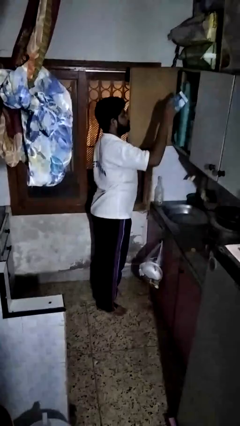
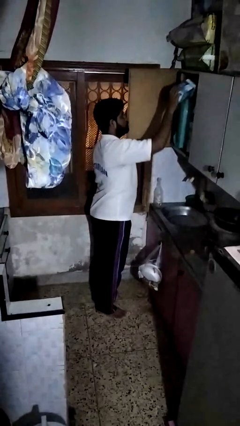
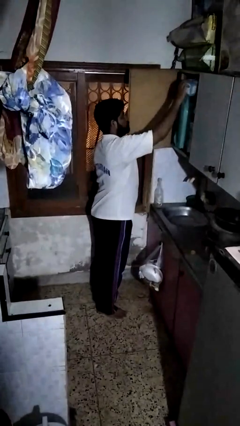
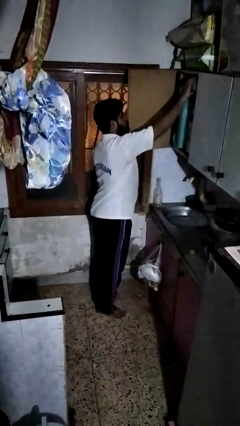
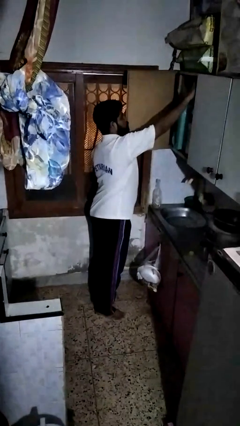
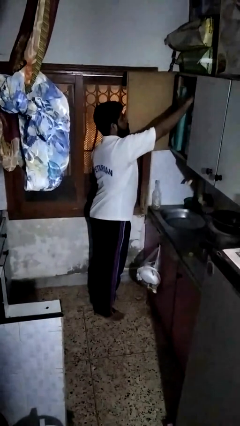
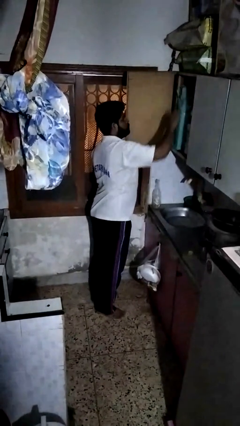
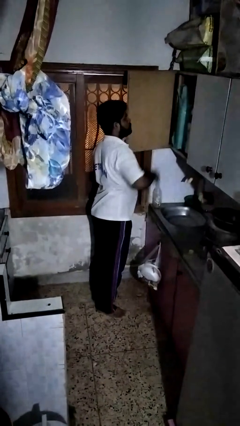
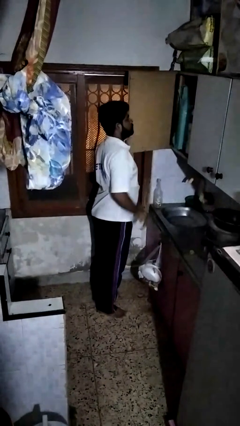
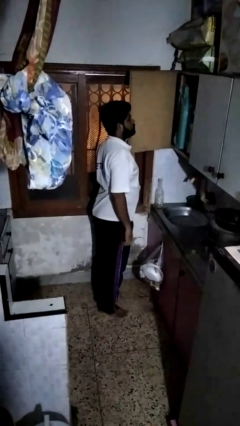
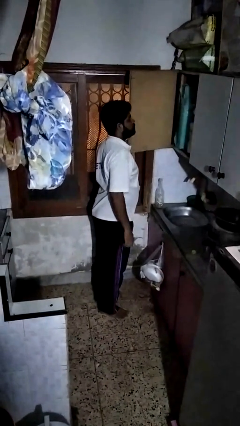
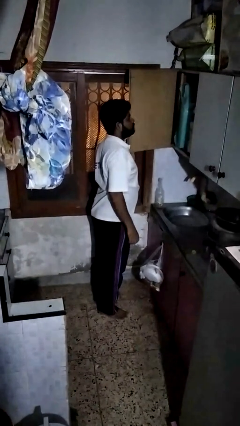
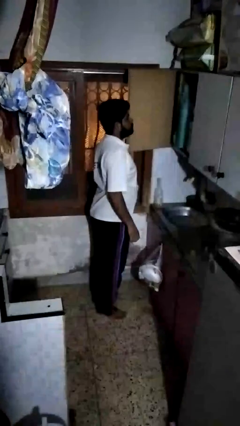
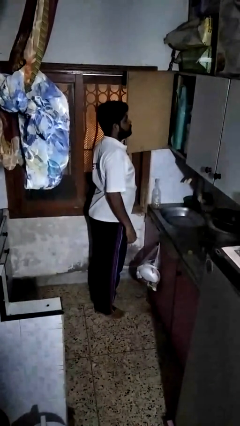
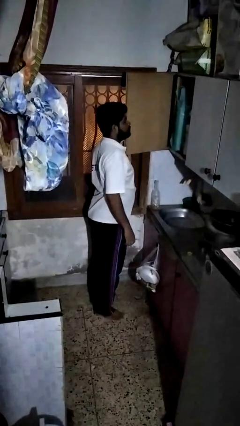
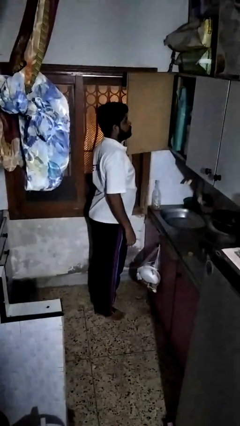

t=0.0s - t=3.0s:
person puts down object into cabinet

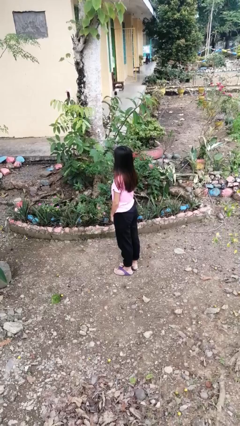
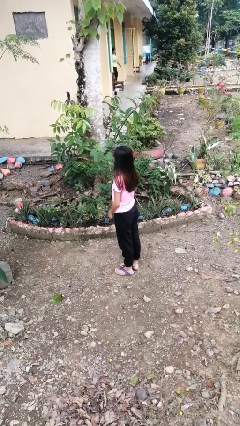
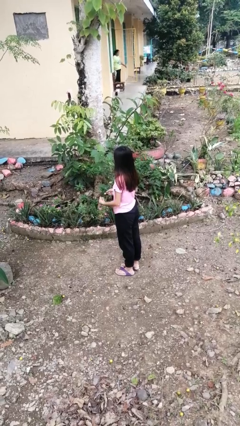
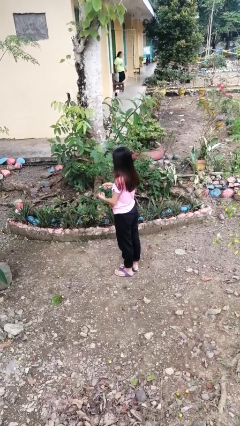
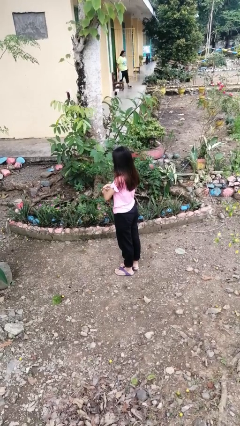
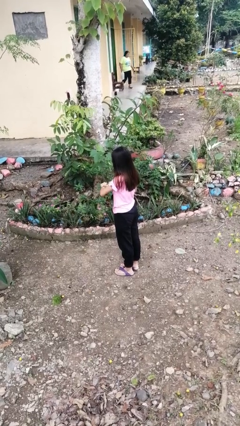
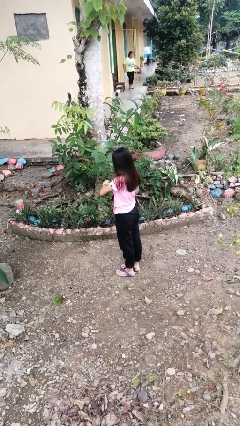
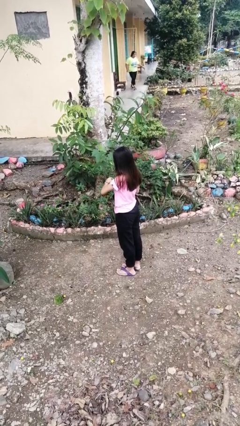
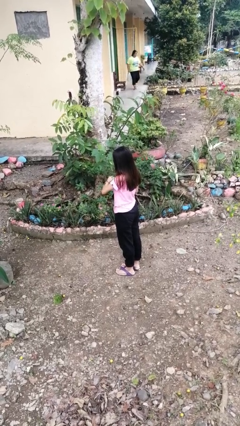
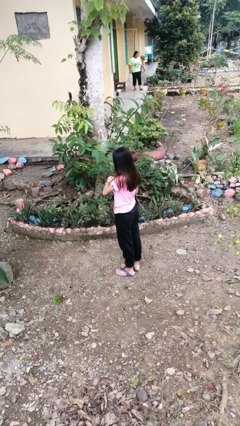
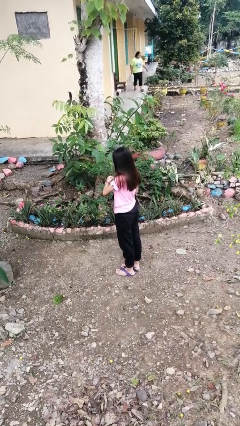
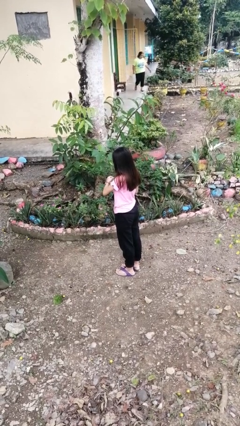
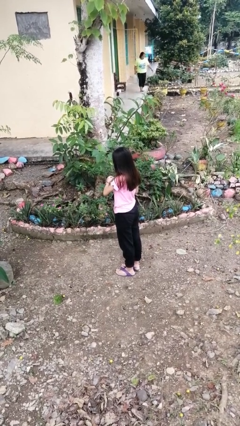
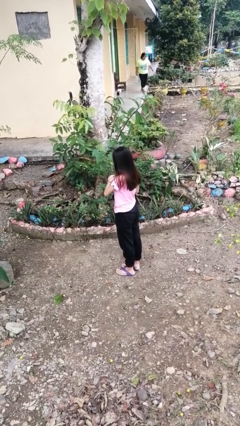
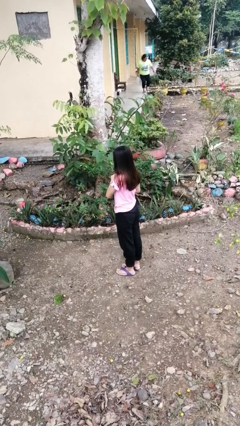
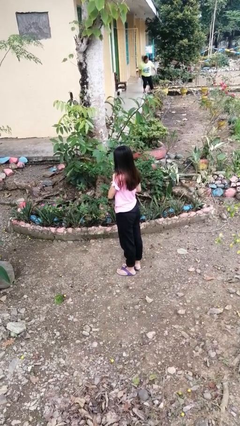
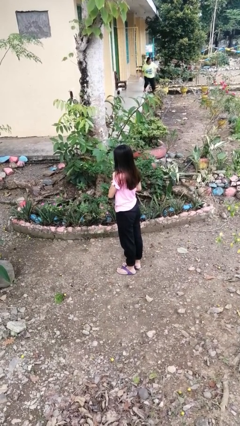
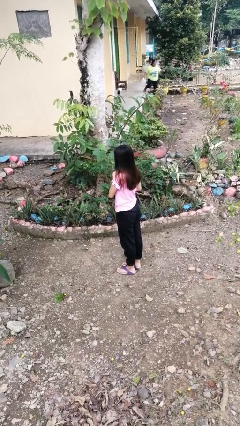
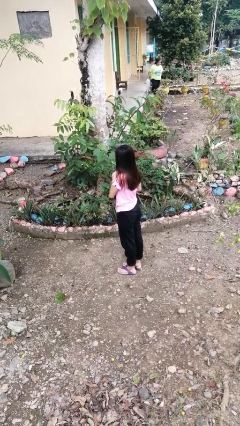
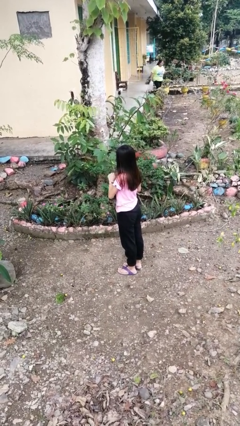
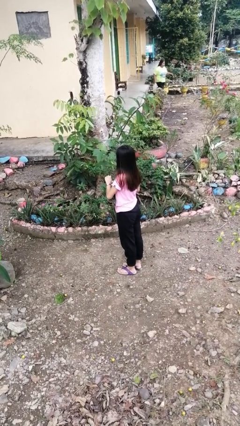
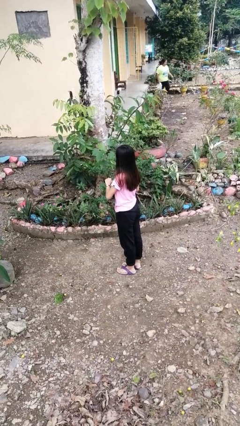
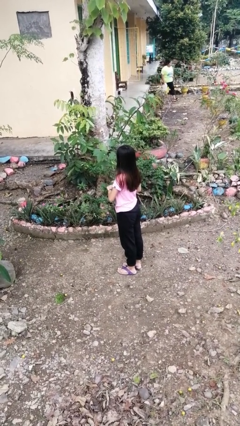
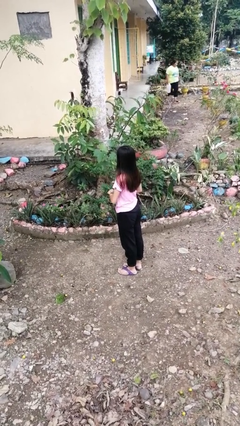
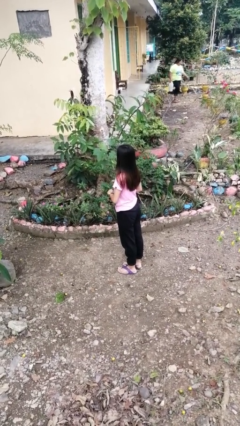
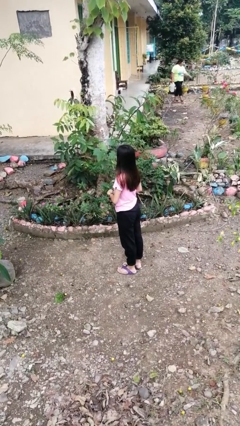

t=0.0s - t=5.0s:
person puts on wristwatch

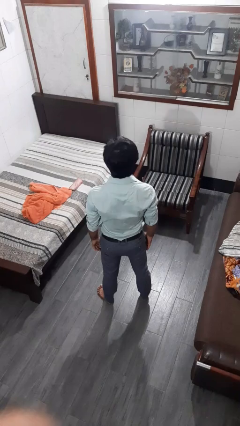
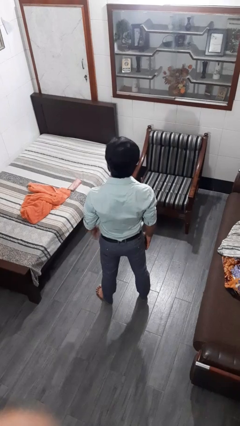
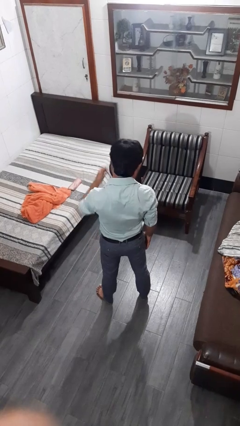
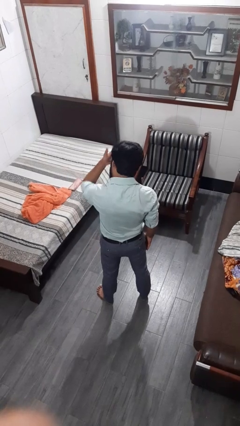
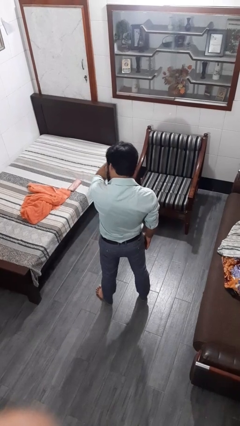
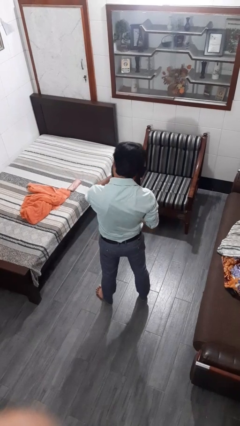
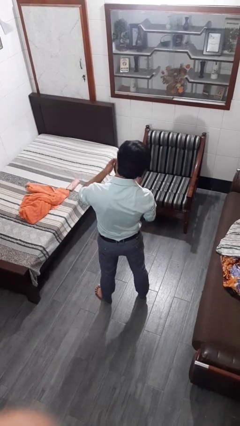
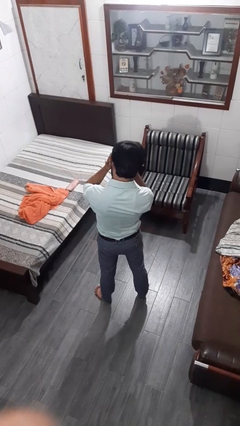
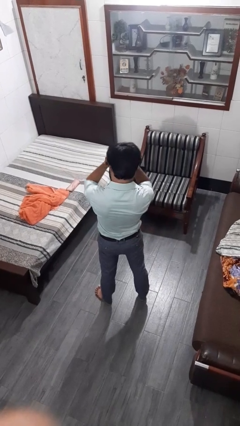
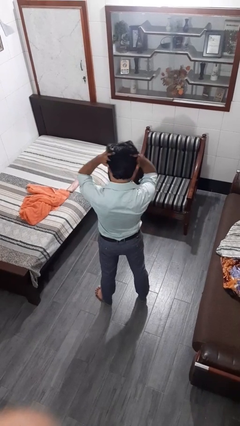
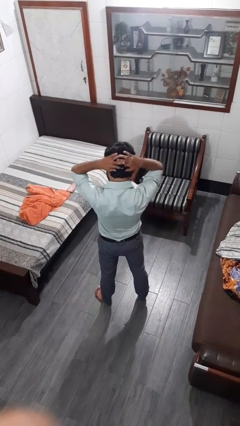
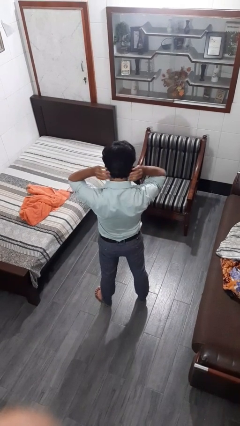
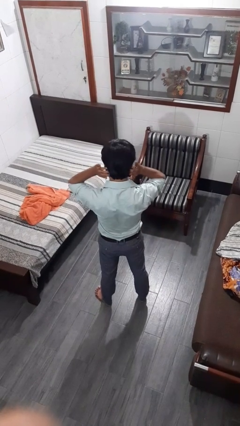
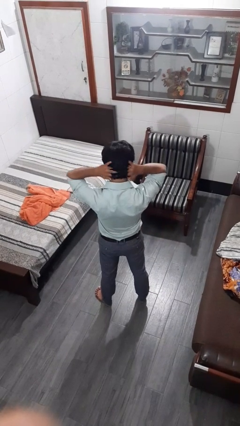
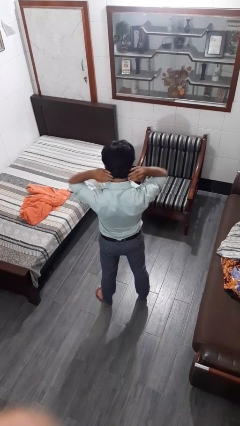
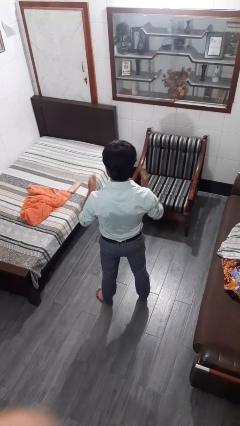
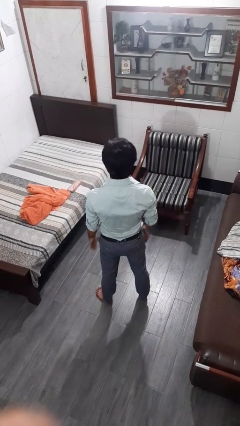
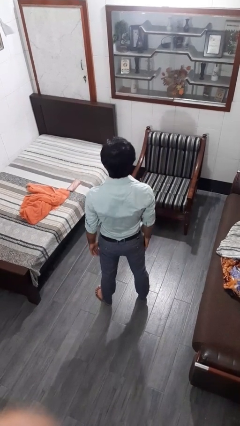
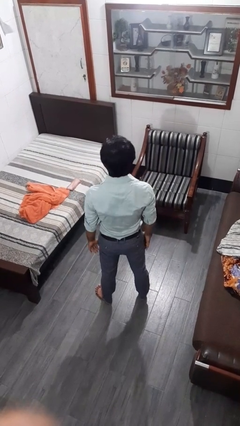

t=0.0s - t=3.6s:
person strokes hair

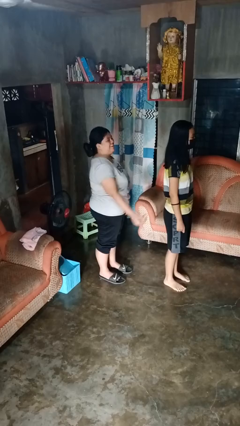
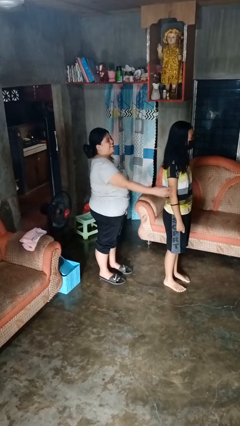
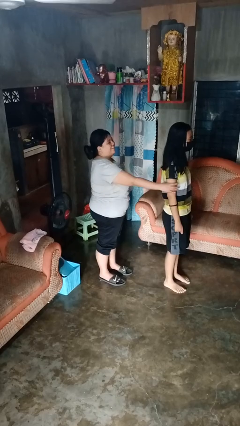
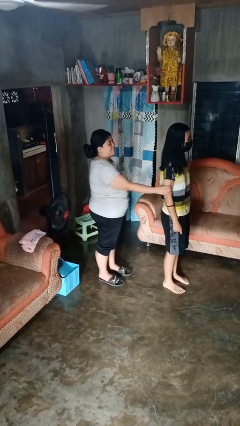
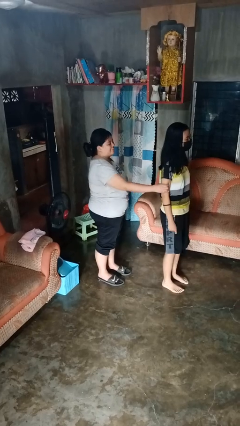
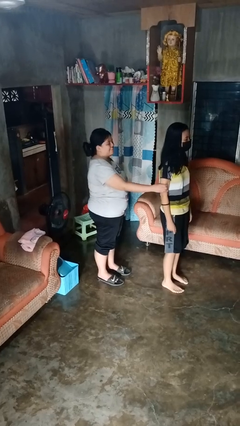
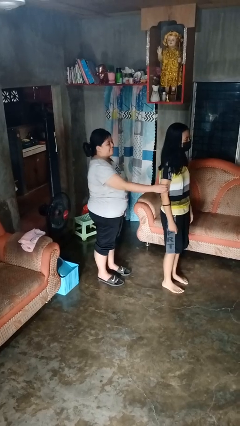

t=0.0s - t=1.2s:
person grabs person by shoulder

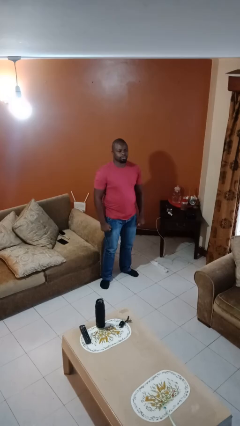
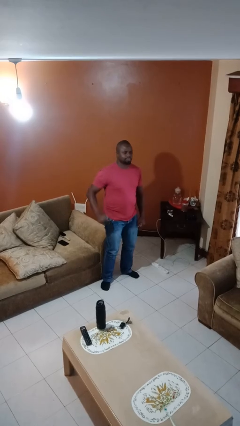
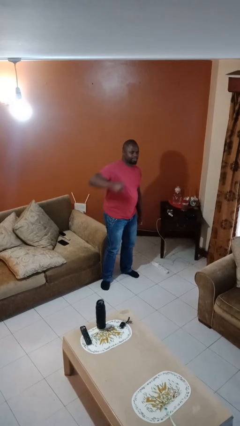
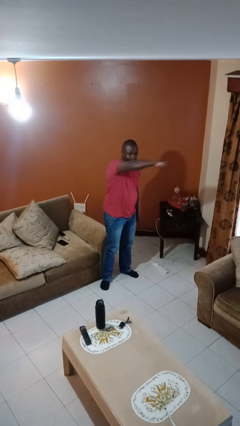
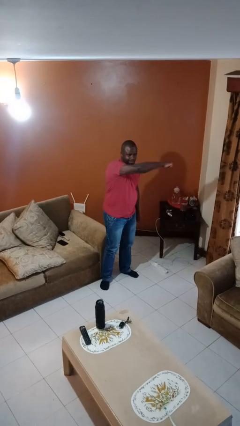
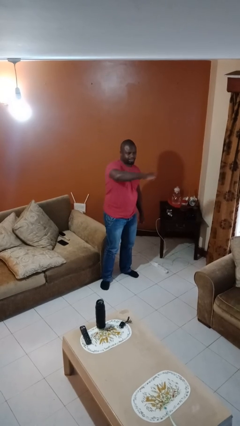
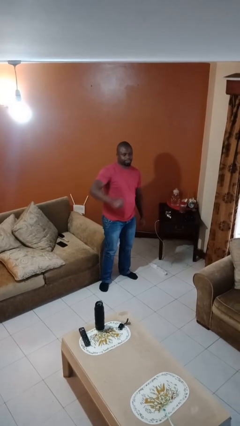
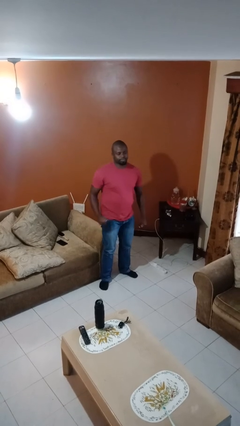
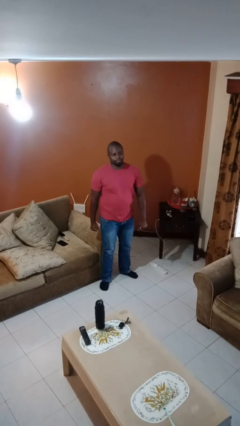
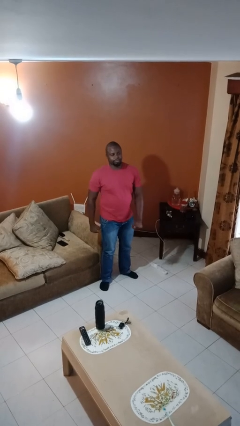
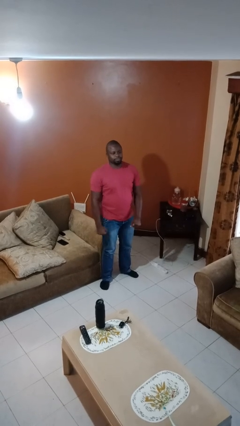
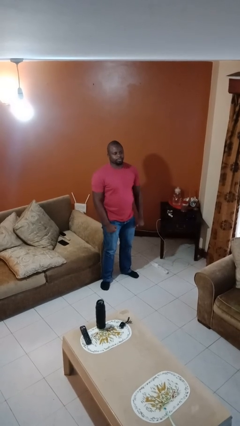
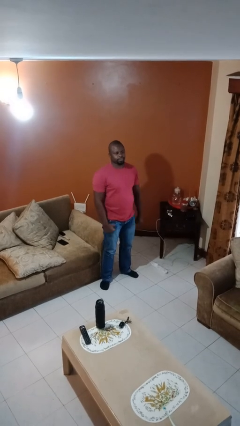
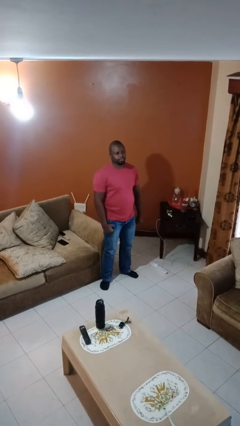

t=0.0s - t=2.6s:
person punches

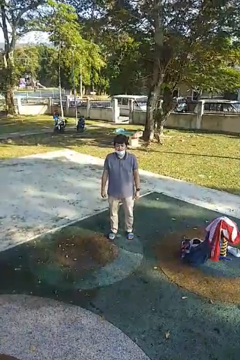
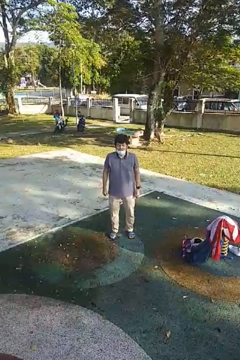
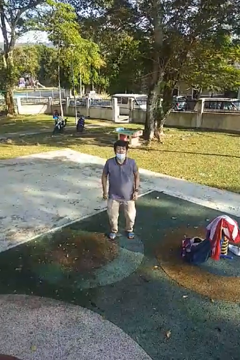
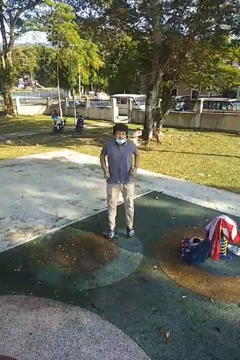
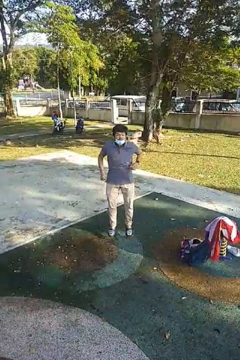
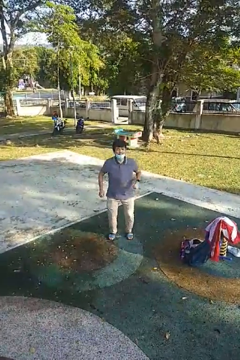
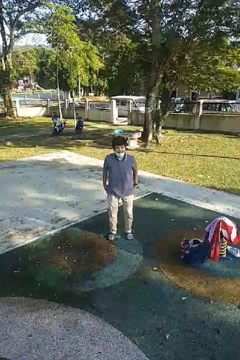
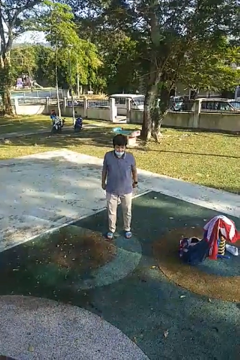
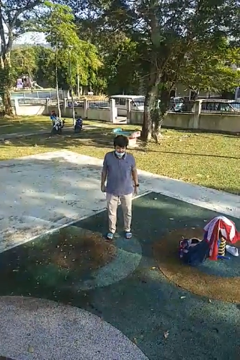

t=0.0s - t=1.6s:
person jumps

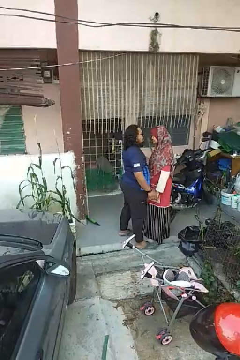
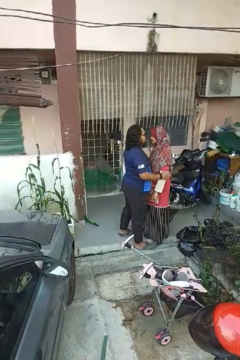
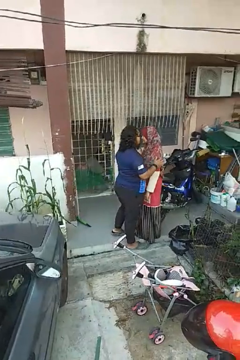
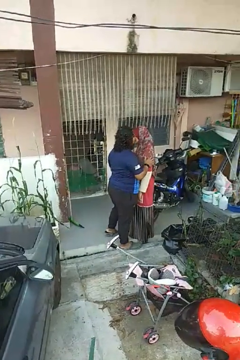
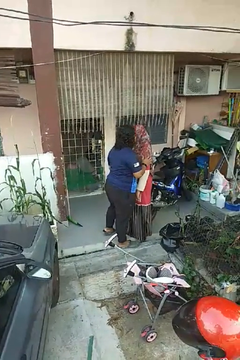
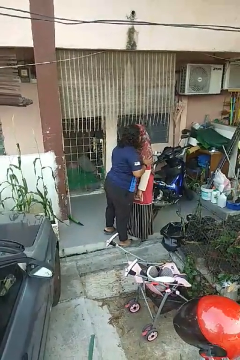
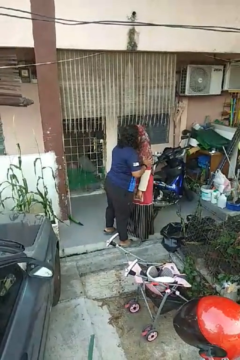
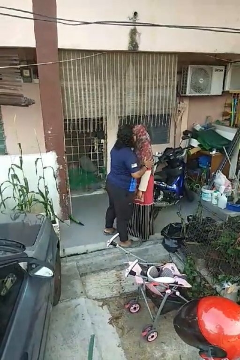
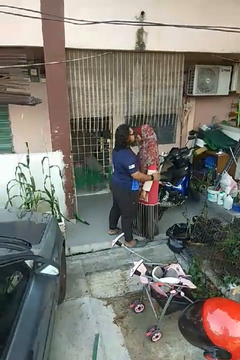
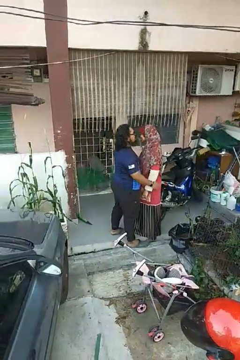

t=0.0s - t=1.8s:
person kisses cheek of person
